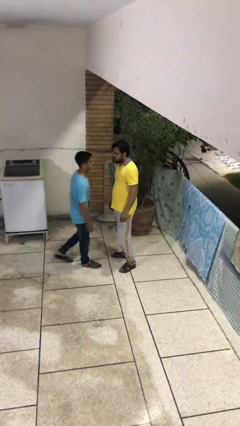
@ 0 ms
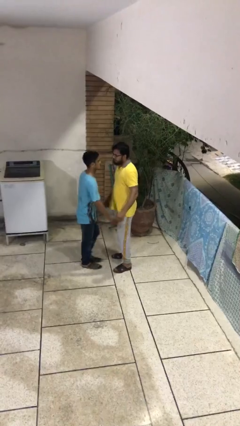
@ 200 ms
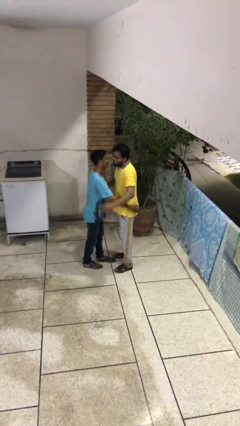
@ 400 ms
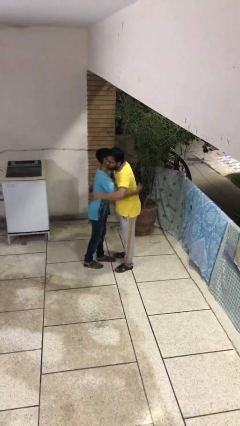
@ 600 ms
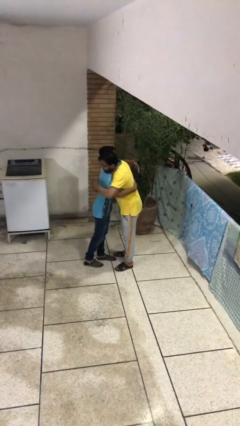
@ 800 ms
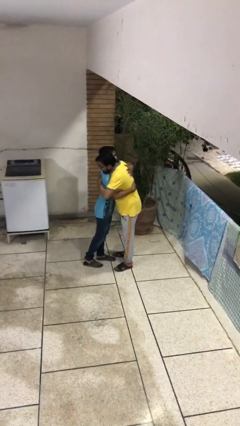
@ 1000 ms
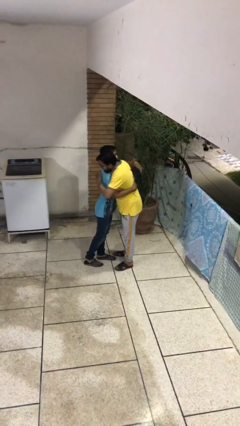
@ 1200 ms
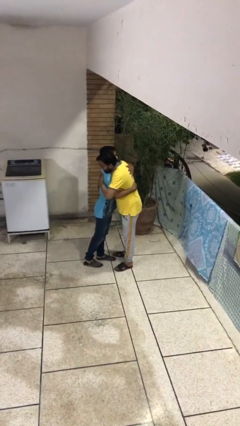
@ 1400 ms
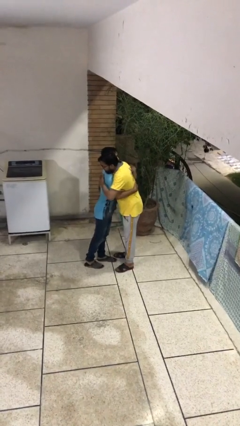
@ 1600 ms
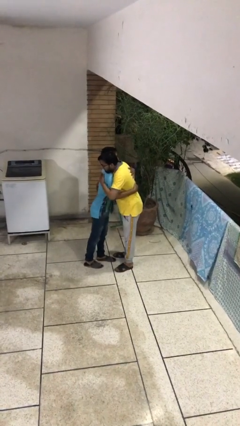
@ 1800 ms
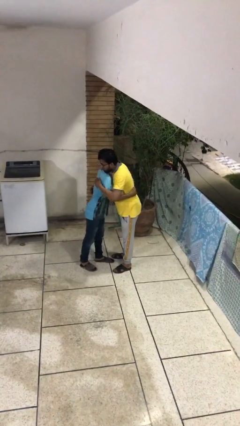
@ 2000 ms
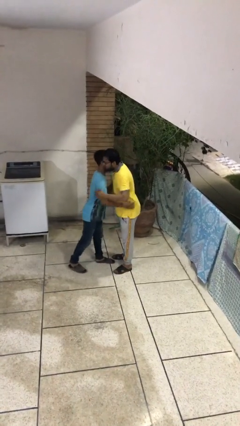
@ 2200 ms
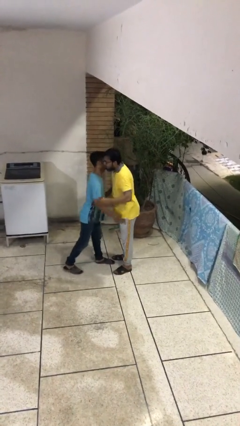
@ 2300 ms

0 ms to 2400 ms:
person embraces person

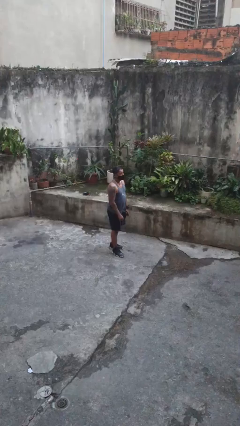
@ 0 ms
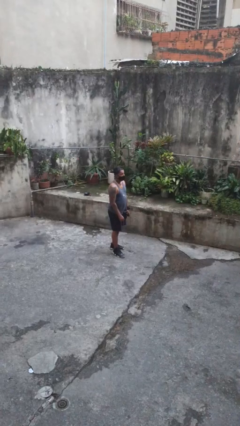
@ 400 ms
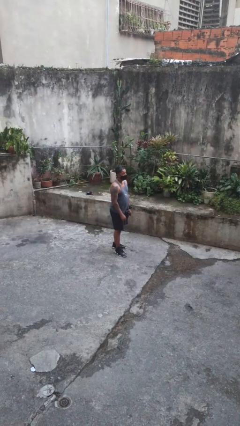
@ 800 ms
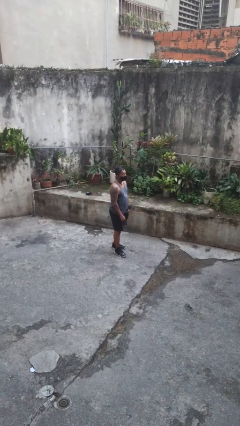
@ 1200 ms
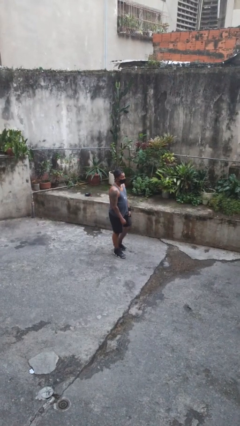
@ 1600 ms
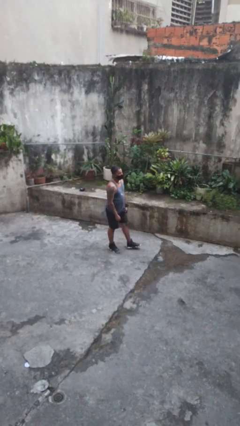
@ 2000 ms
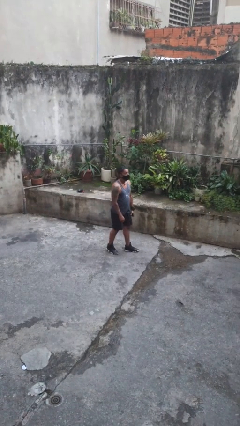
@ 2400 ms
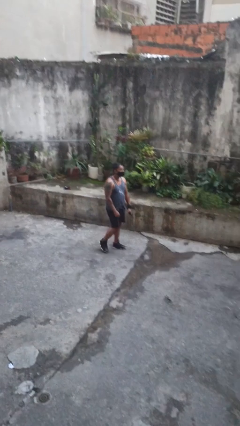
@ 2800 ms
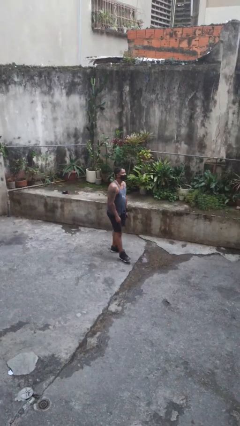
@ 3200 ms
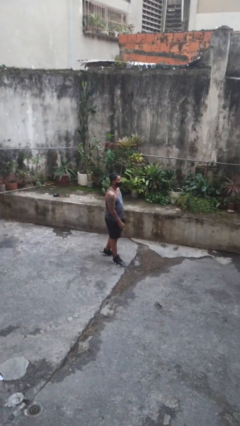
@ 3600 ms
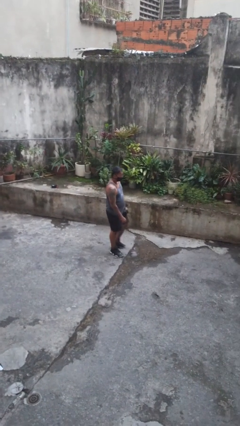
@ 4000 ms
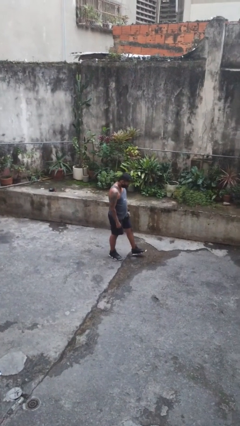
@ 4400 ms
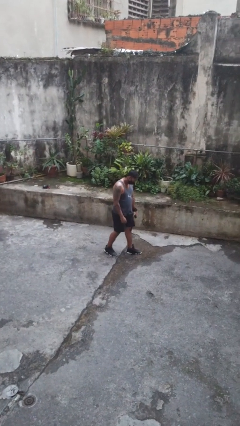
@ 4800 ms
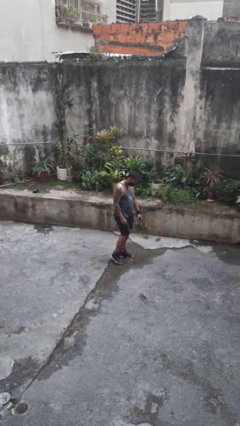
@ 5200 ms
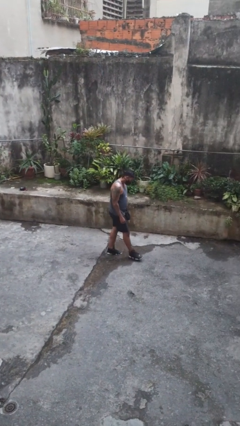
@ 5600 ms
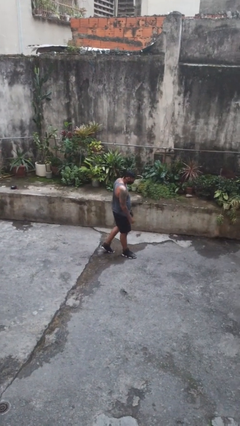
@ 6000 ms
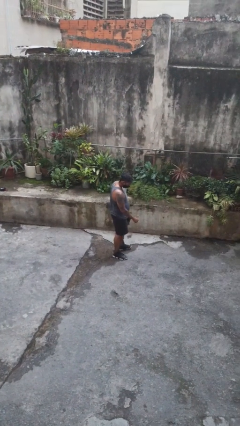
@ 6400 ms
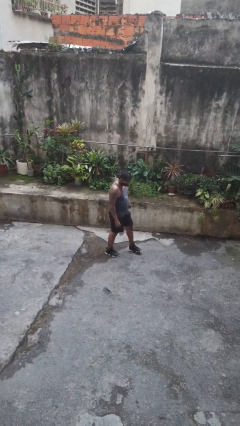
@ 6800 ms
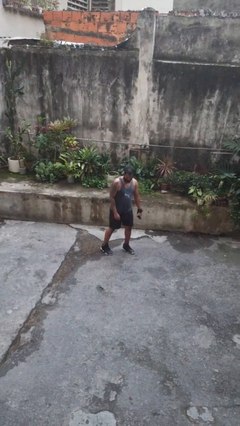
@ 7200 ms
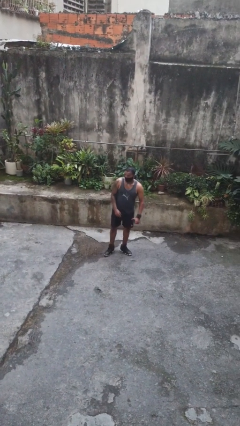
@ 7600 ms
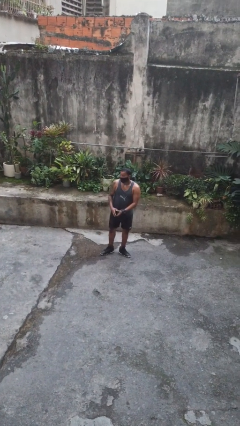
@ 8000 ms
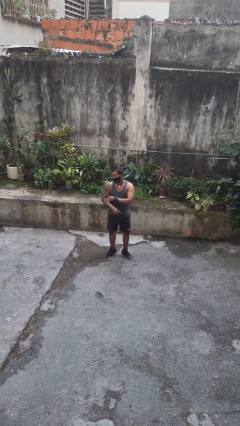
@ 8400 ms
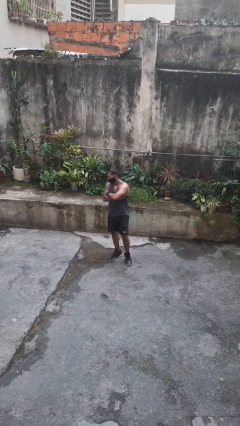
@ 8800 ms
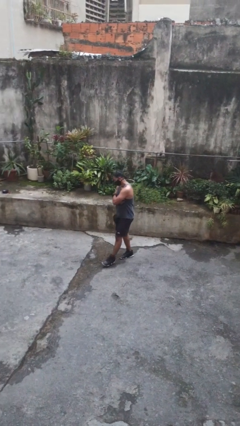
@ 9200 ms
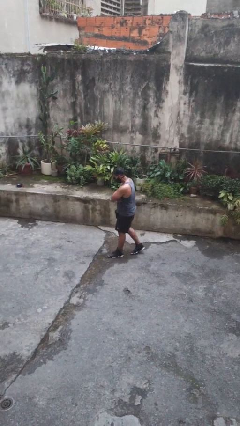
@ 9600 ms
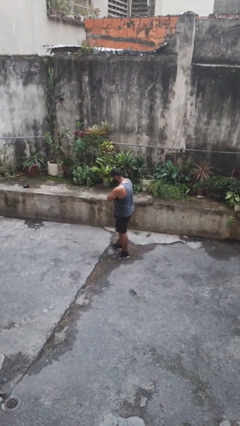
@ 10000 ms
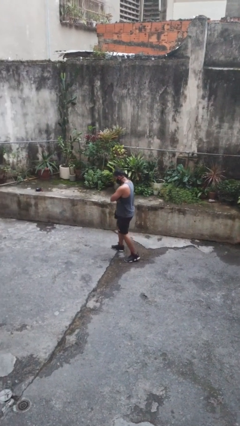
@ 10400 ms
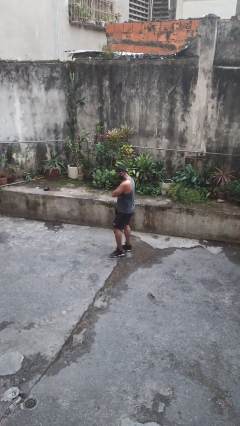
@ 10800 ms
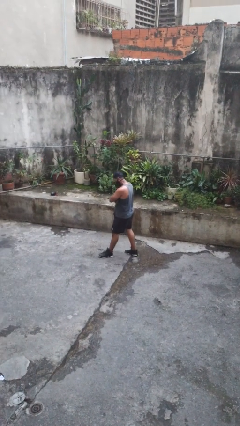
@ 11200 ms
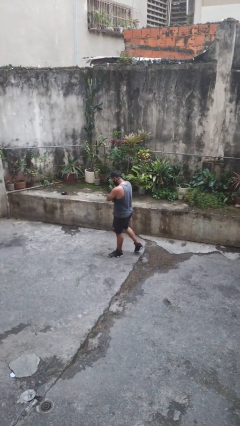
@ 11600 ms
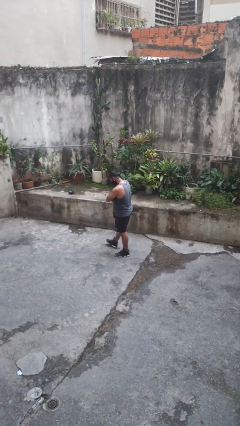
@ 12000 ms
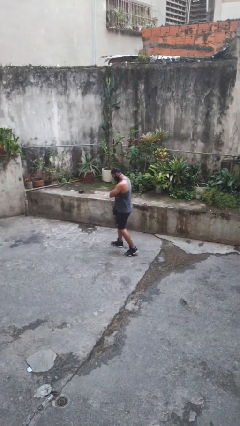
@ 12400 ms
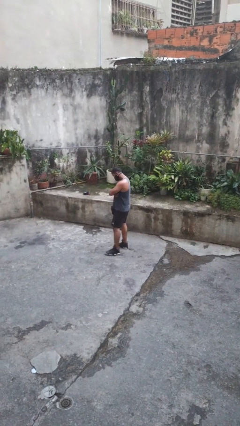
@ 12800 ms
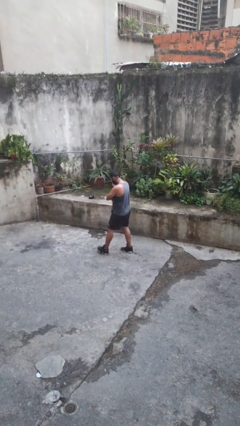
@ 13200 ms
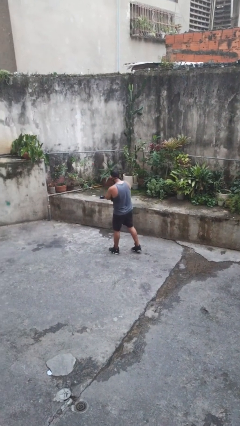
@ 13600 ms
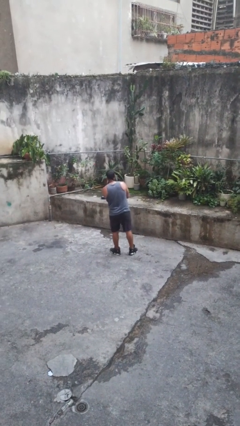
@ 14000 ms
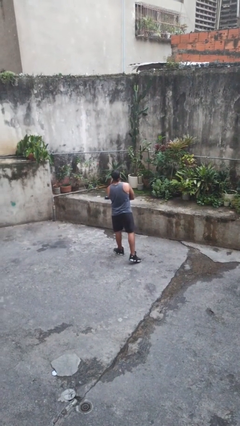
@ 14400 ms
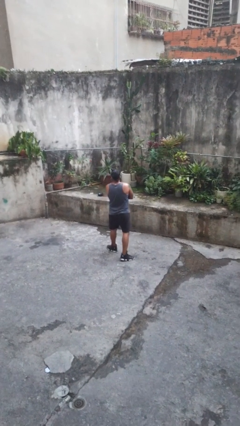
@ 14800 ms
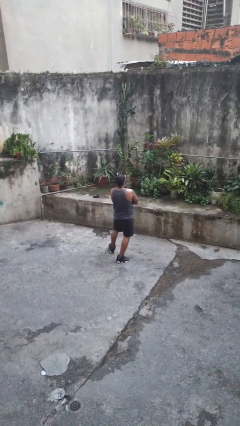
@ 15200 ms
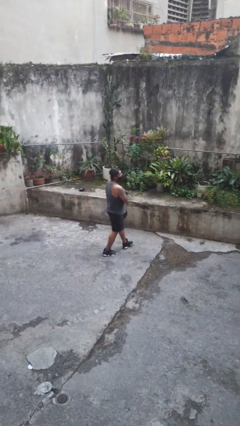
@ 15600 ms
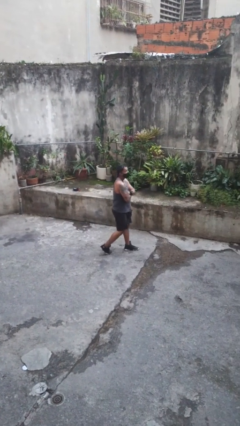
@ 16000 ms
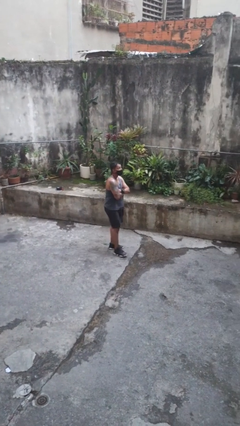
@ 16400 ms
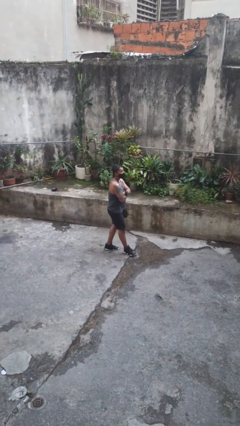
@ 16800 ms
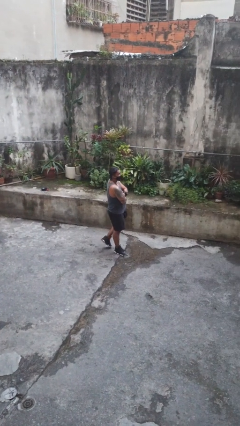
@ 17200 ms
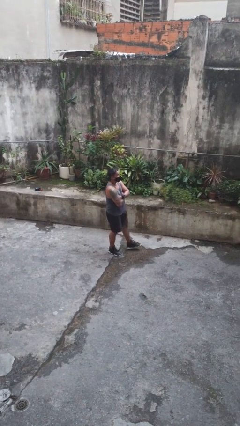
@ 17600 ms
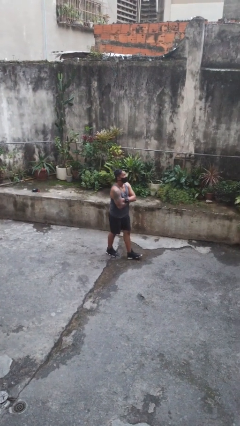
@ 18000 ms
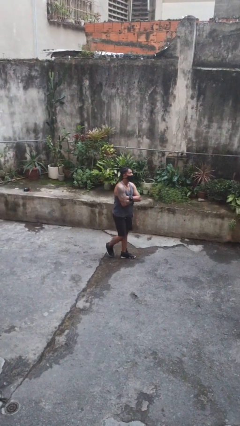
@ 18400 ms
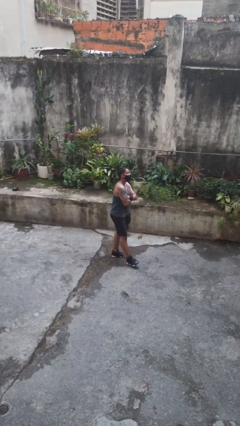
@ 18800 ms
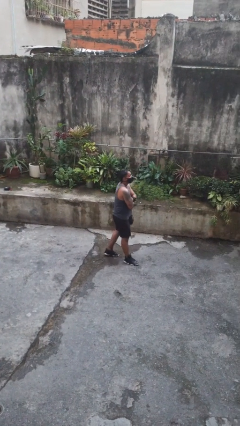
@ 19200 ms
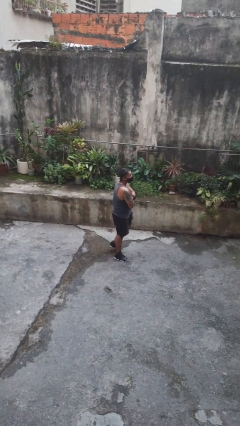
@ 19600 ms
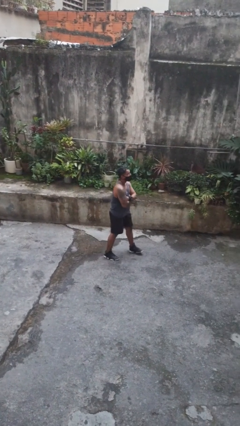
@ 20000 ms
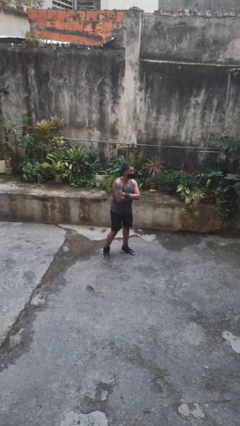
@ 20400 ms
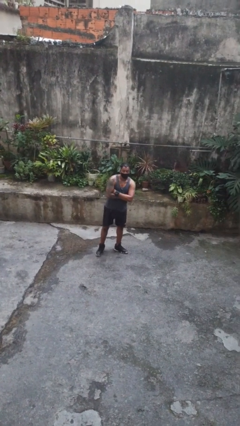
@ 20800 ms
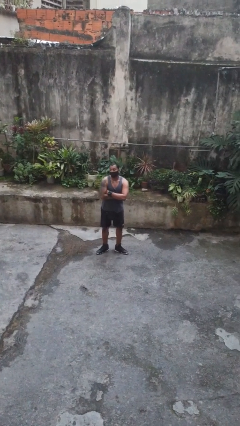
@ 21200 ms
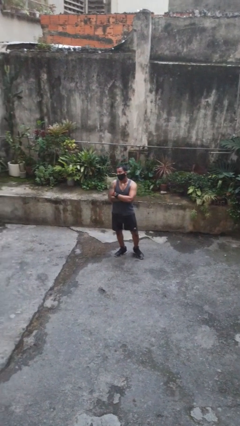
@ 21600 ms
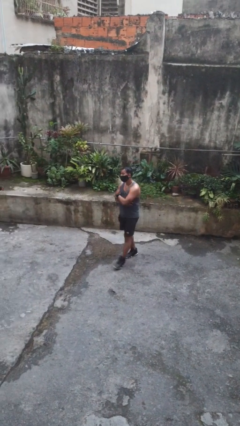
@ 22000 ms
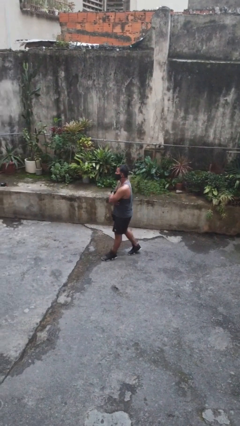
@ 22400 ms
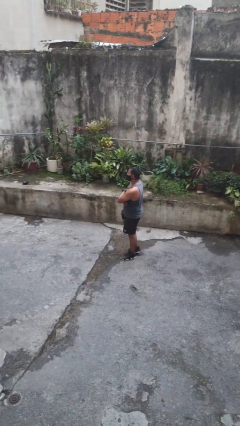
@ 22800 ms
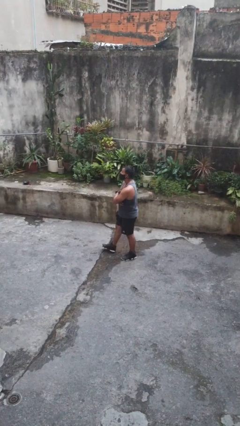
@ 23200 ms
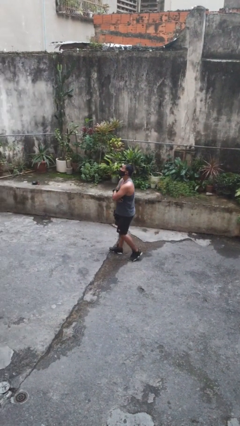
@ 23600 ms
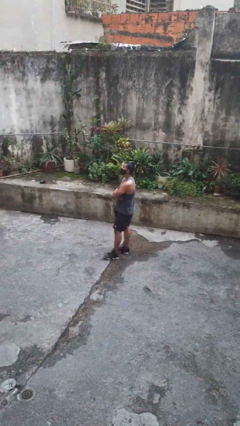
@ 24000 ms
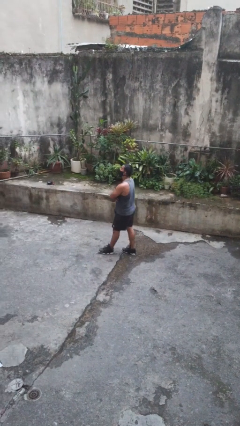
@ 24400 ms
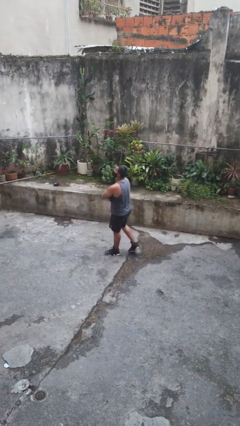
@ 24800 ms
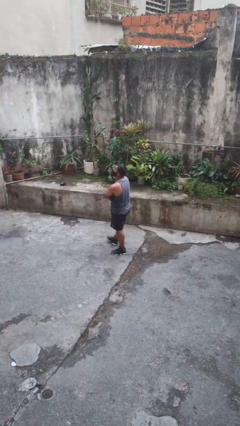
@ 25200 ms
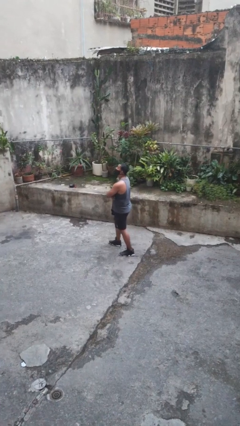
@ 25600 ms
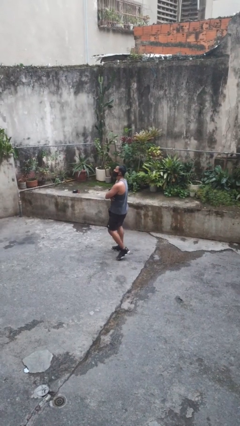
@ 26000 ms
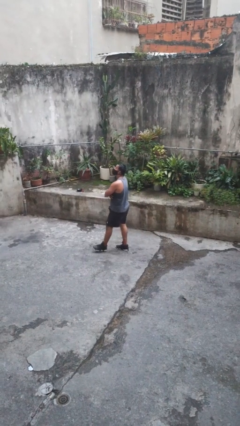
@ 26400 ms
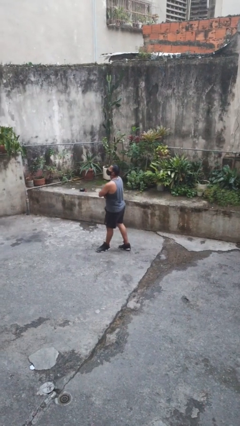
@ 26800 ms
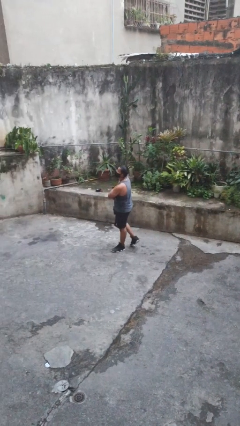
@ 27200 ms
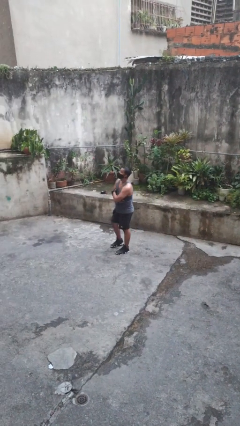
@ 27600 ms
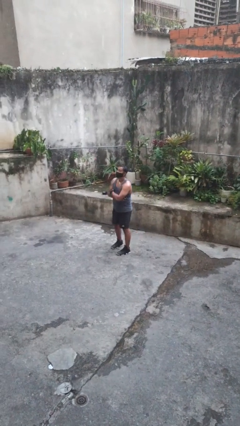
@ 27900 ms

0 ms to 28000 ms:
person walks

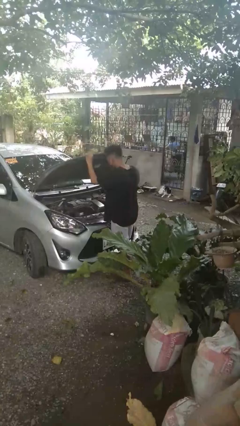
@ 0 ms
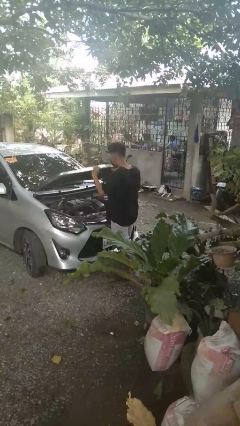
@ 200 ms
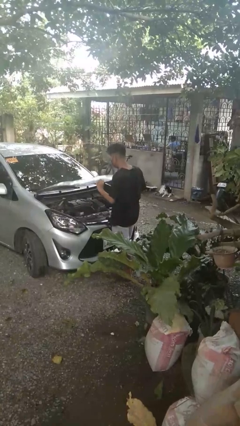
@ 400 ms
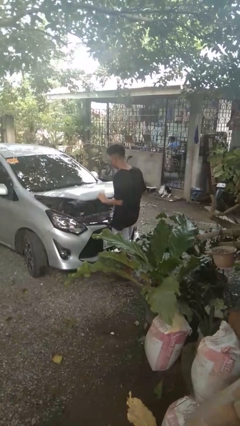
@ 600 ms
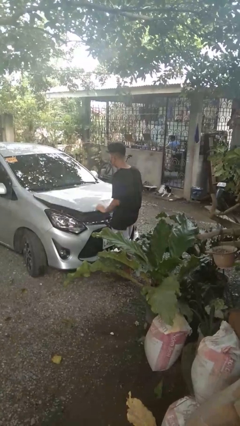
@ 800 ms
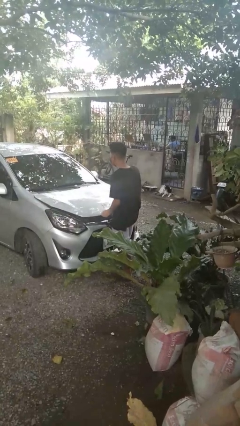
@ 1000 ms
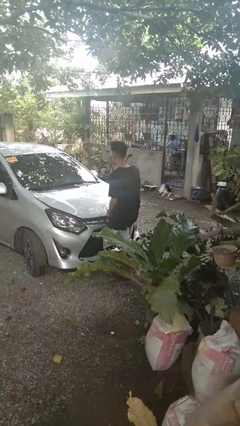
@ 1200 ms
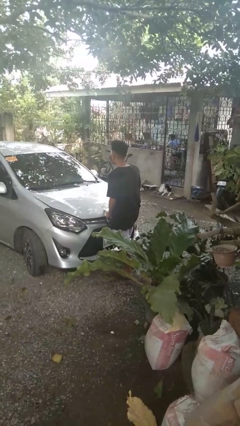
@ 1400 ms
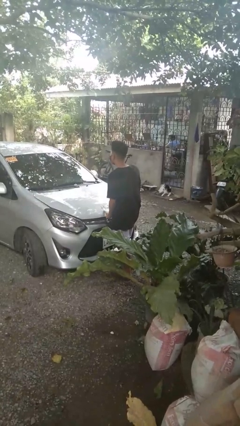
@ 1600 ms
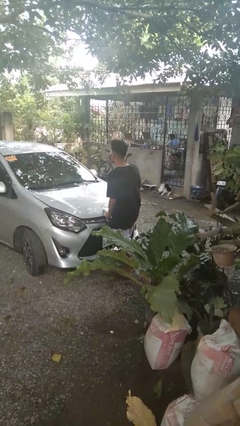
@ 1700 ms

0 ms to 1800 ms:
person closes car hood
